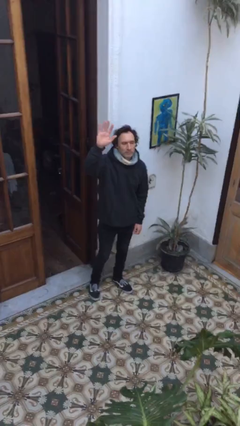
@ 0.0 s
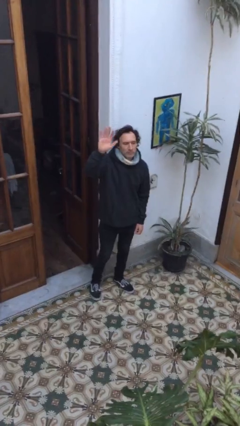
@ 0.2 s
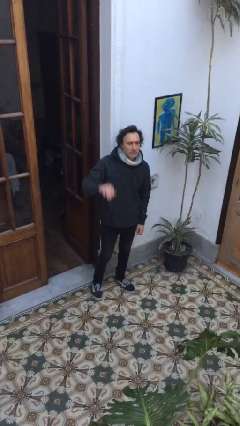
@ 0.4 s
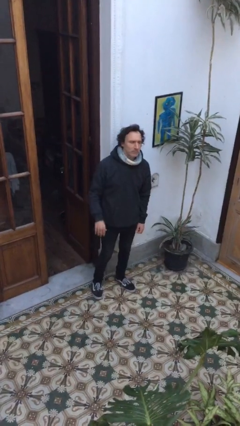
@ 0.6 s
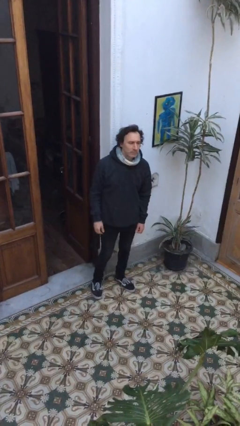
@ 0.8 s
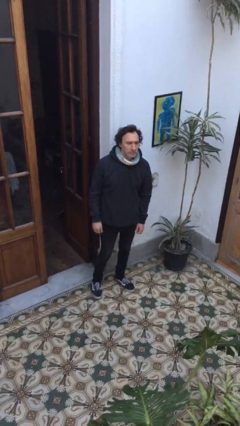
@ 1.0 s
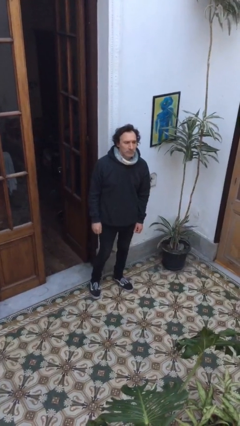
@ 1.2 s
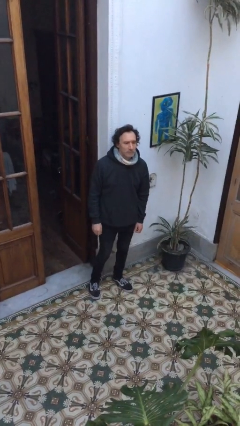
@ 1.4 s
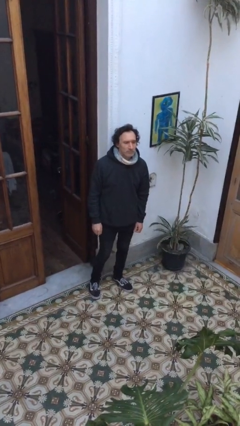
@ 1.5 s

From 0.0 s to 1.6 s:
person gestures lower hand

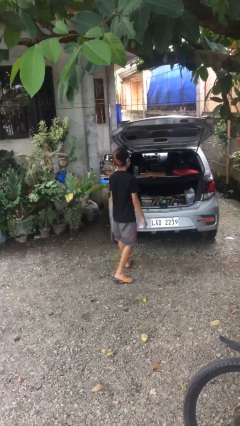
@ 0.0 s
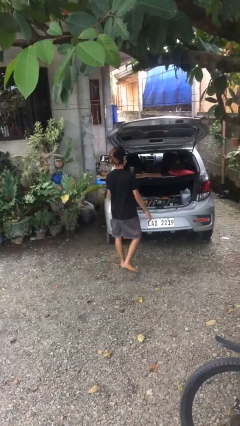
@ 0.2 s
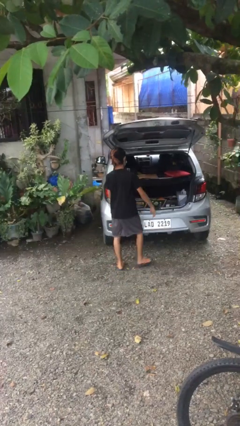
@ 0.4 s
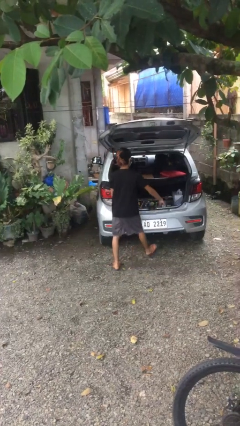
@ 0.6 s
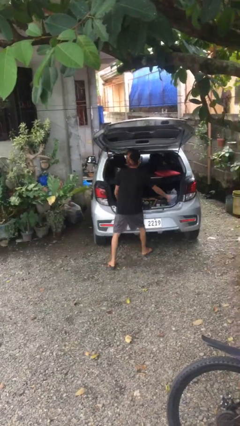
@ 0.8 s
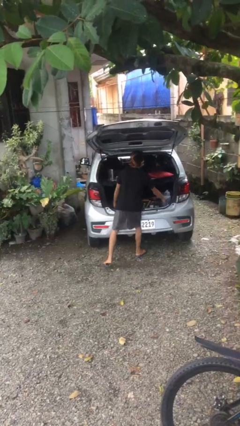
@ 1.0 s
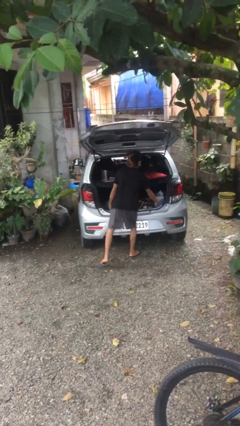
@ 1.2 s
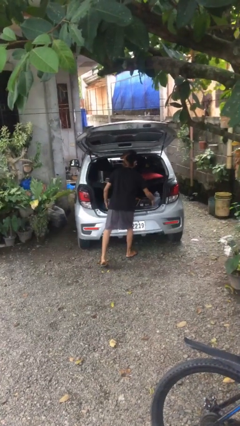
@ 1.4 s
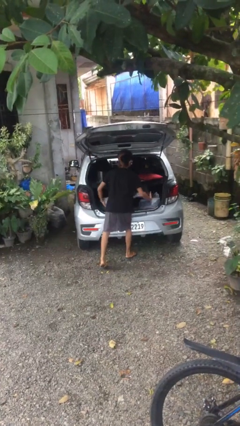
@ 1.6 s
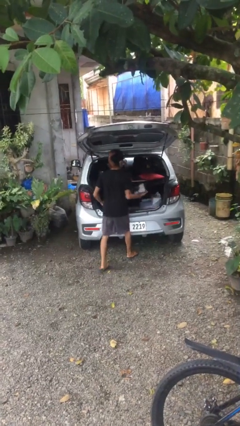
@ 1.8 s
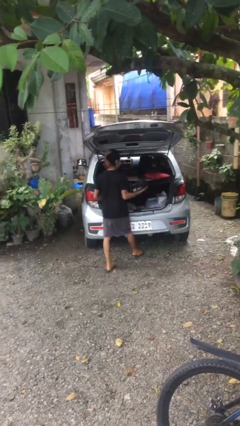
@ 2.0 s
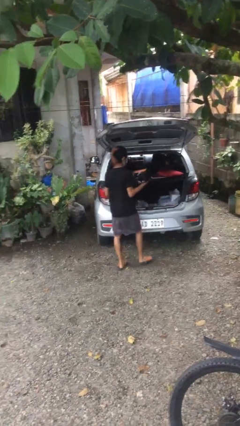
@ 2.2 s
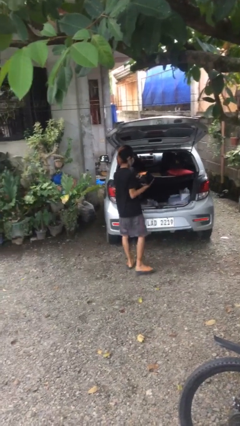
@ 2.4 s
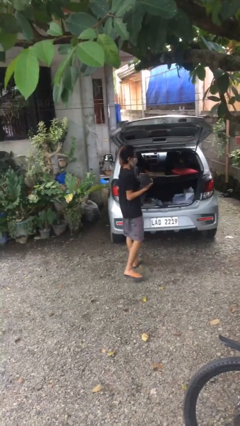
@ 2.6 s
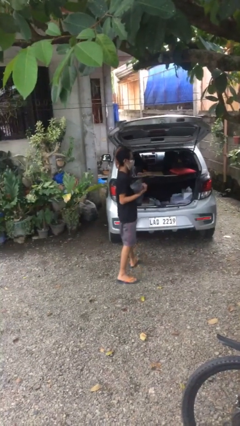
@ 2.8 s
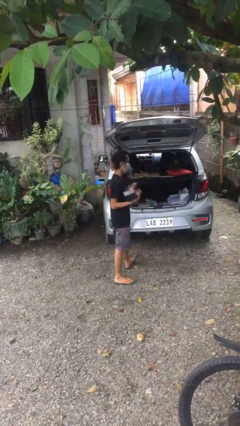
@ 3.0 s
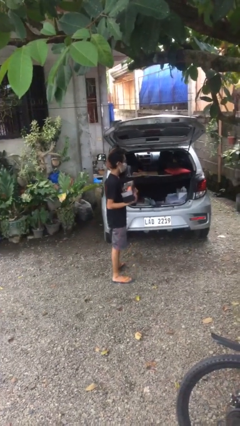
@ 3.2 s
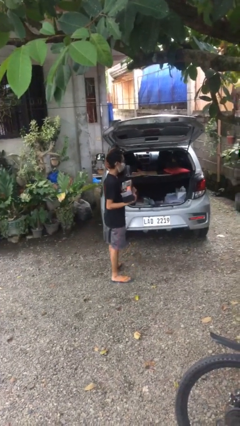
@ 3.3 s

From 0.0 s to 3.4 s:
person unloads car

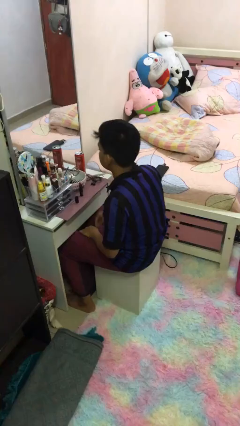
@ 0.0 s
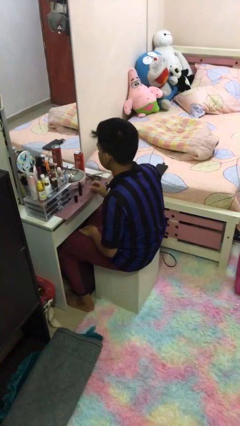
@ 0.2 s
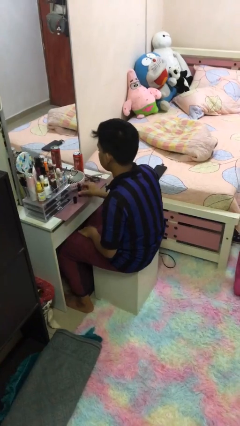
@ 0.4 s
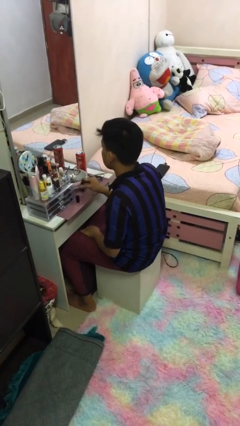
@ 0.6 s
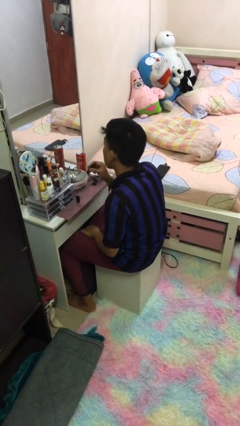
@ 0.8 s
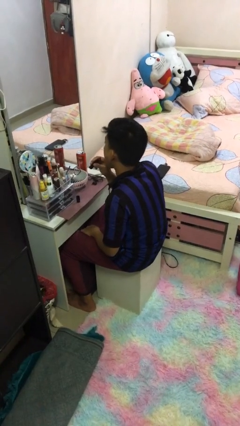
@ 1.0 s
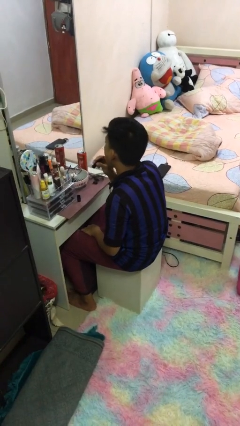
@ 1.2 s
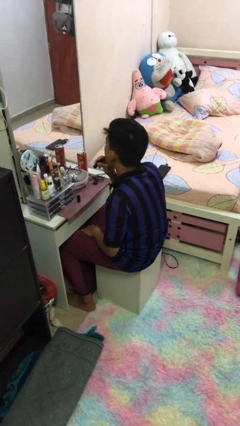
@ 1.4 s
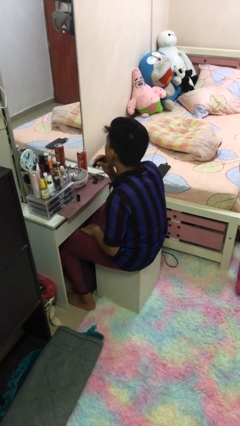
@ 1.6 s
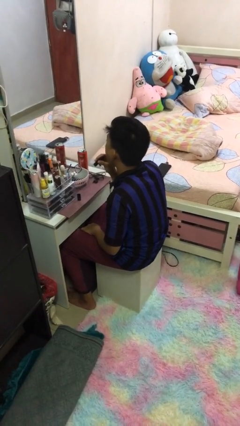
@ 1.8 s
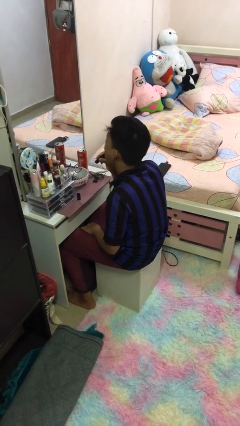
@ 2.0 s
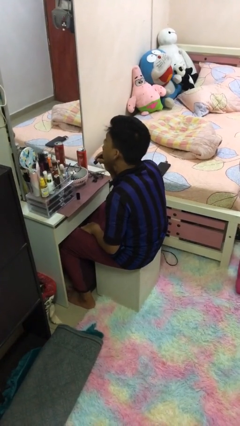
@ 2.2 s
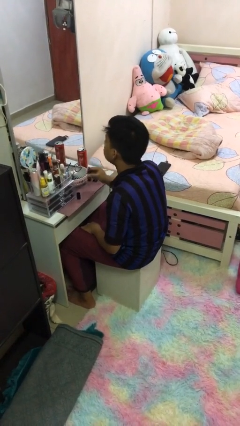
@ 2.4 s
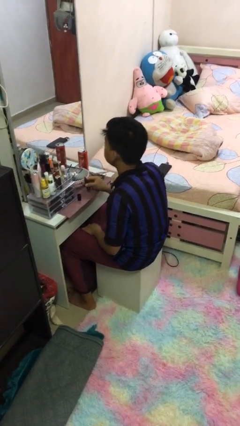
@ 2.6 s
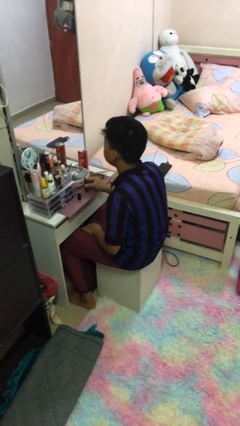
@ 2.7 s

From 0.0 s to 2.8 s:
person applies lip makeup

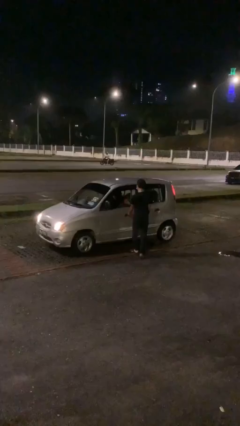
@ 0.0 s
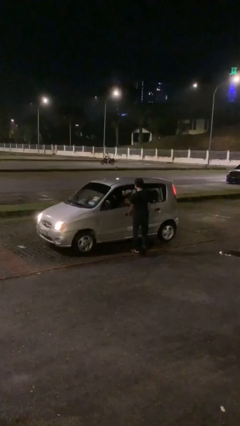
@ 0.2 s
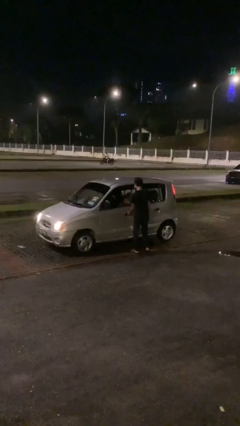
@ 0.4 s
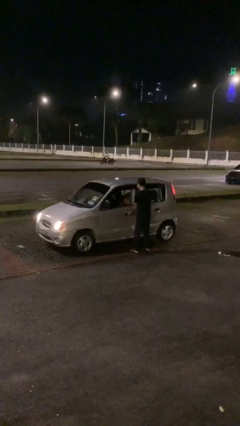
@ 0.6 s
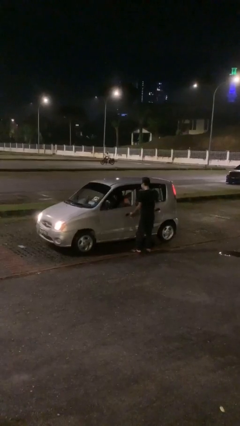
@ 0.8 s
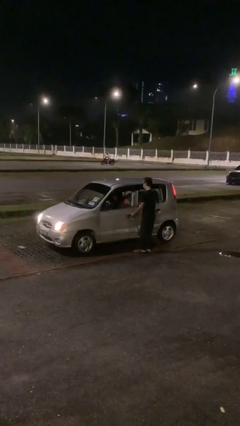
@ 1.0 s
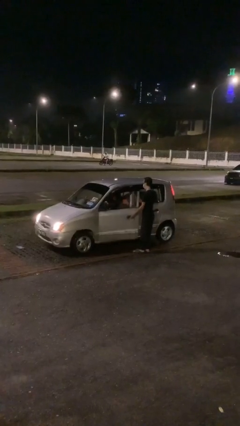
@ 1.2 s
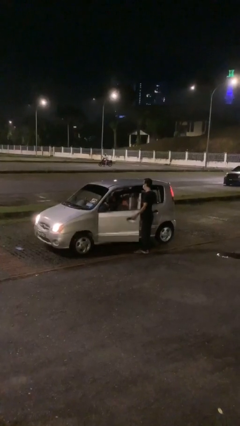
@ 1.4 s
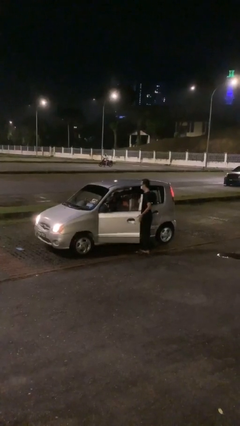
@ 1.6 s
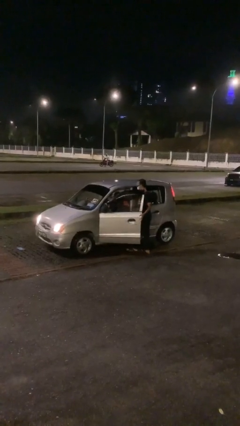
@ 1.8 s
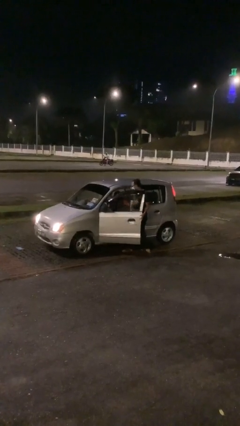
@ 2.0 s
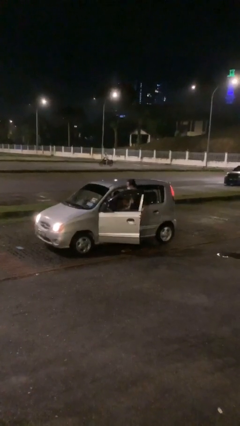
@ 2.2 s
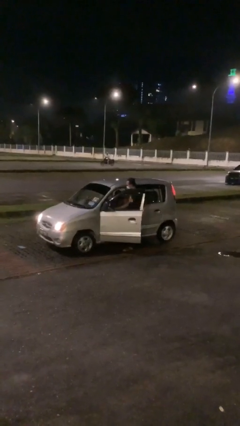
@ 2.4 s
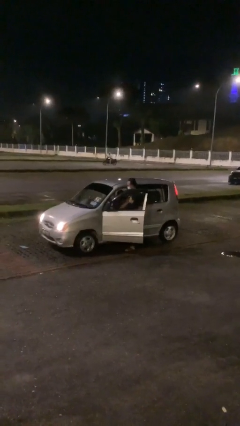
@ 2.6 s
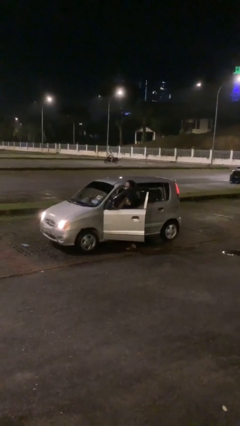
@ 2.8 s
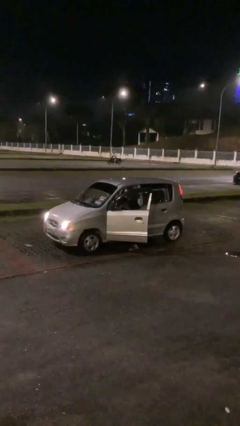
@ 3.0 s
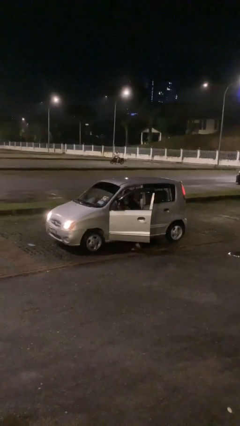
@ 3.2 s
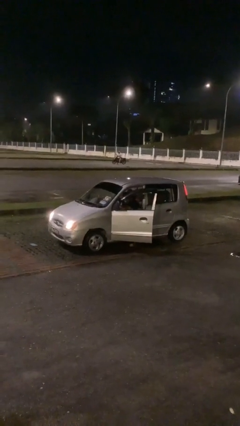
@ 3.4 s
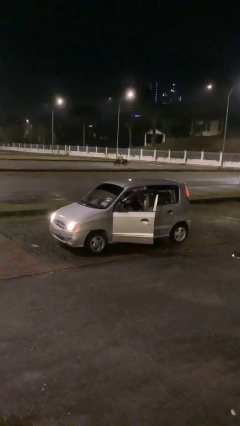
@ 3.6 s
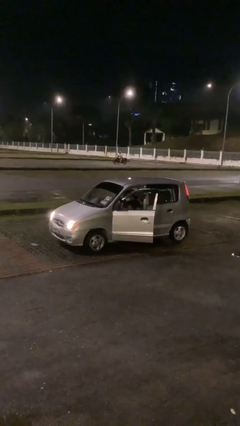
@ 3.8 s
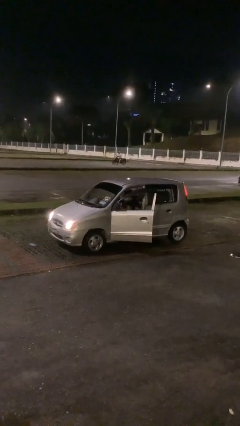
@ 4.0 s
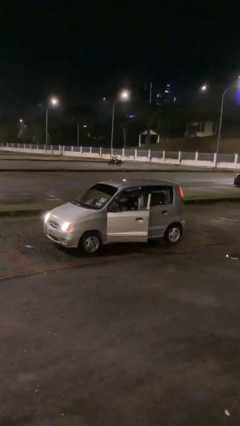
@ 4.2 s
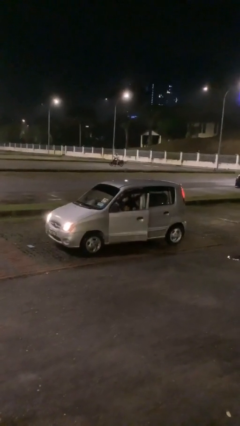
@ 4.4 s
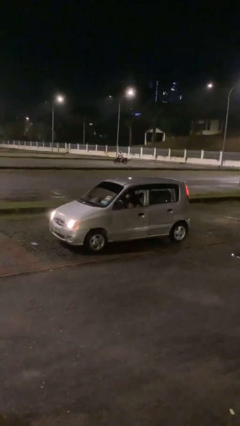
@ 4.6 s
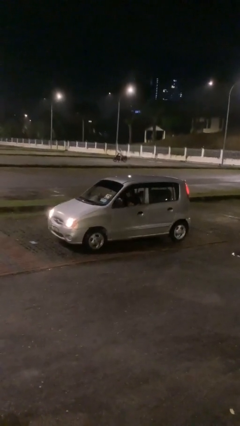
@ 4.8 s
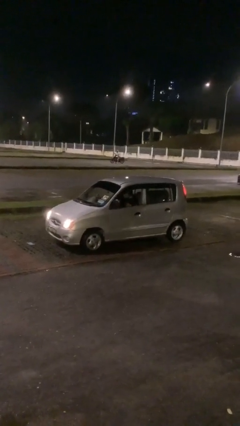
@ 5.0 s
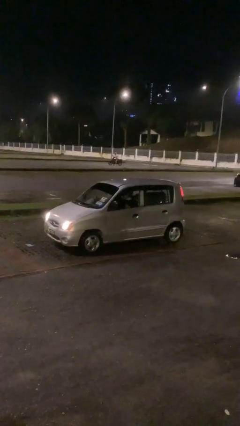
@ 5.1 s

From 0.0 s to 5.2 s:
car picks up person

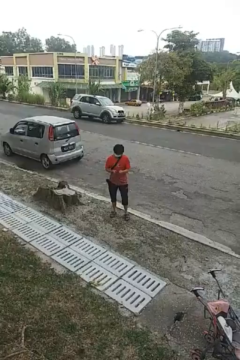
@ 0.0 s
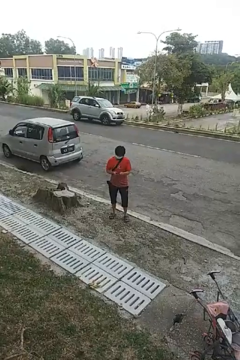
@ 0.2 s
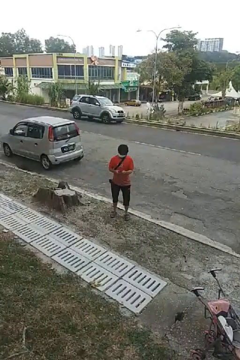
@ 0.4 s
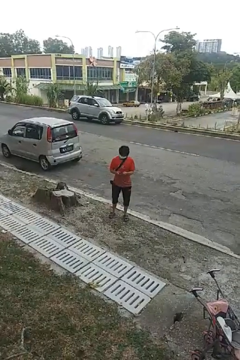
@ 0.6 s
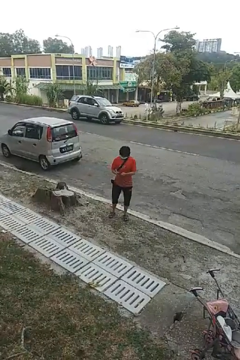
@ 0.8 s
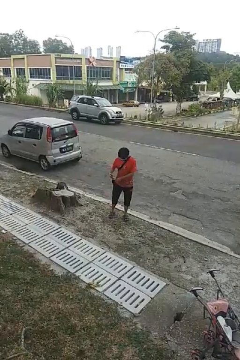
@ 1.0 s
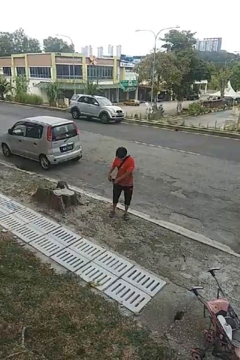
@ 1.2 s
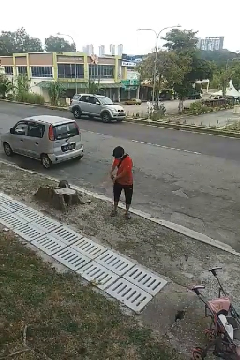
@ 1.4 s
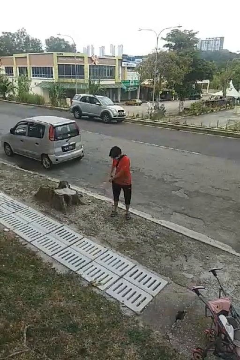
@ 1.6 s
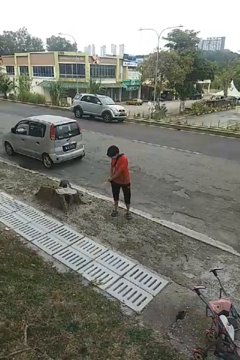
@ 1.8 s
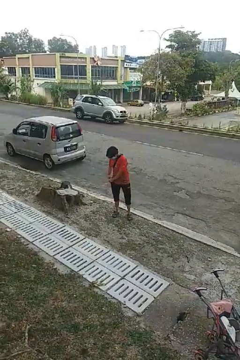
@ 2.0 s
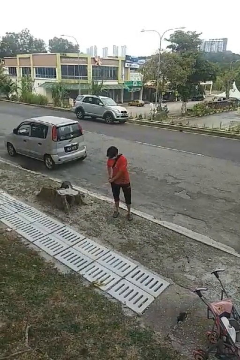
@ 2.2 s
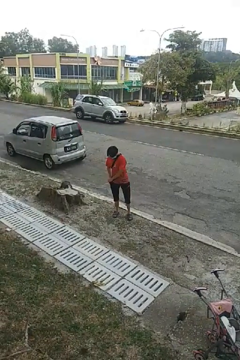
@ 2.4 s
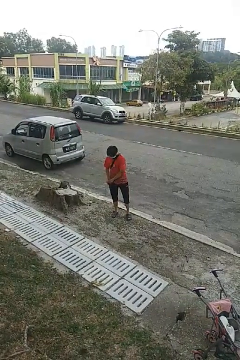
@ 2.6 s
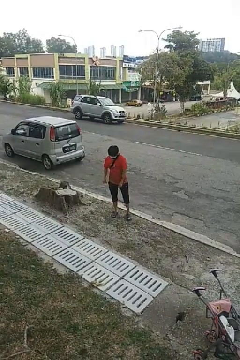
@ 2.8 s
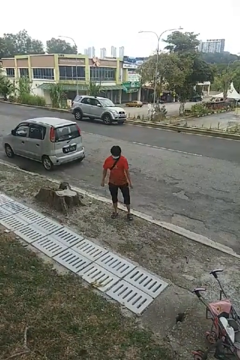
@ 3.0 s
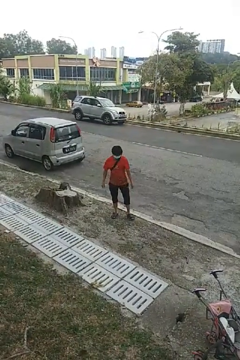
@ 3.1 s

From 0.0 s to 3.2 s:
person puts phone into pocket

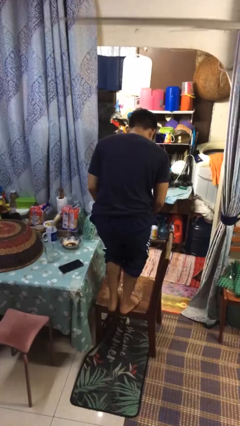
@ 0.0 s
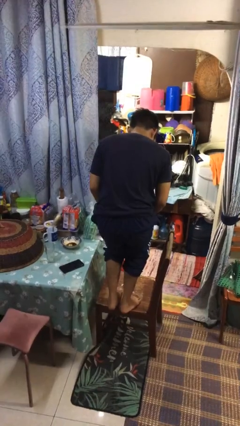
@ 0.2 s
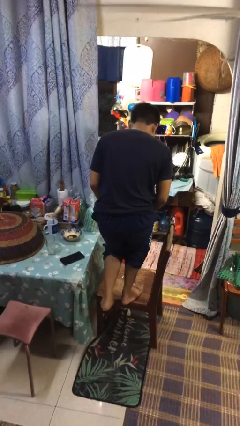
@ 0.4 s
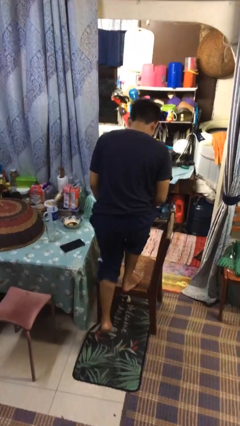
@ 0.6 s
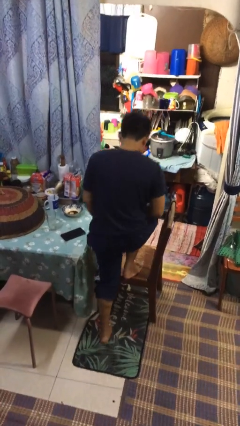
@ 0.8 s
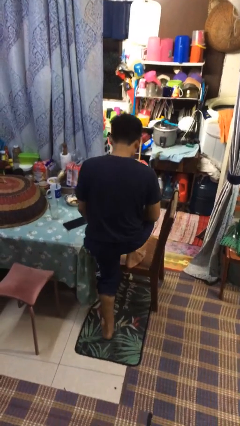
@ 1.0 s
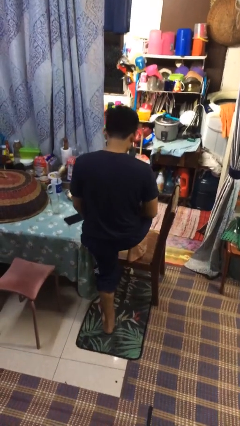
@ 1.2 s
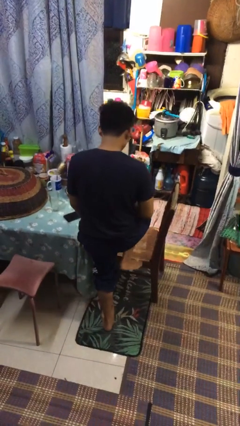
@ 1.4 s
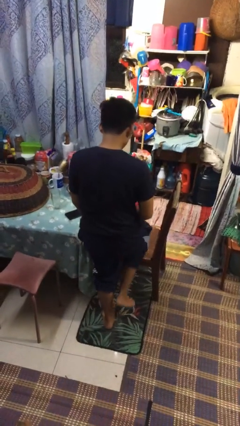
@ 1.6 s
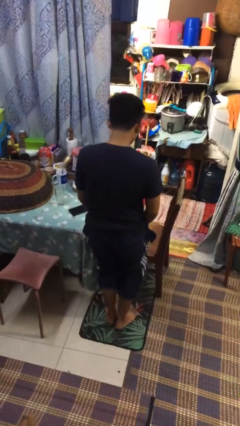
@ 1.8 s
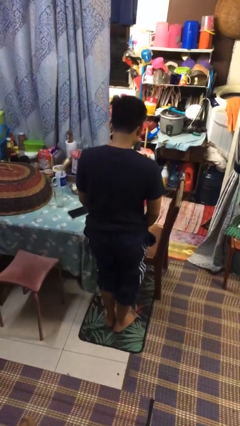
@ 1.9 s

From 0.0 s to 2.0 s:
person climbs off chair
